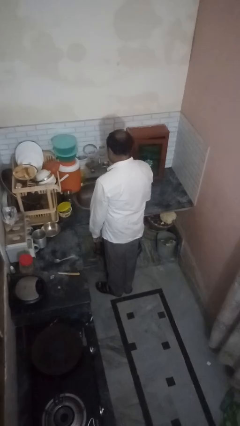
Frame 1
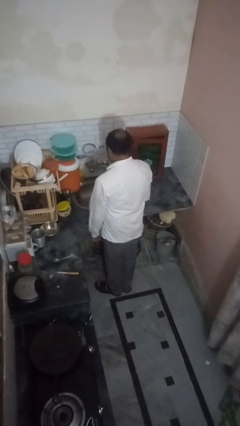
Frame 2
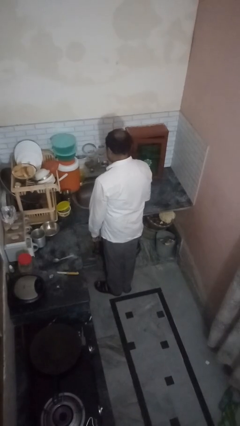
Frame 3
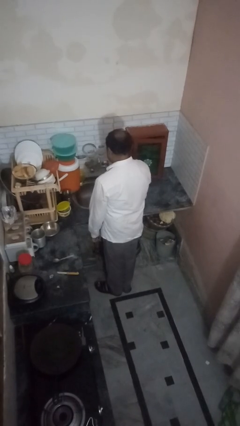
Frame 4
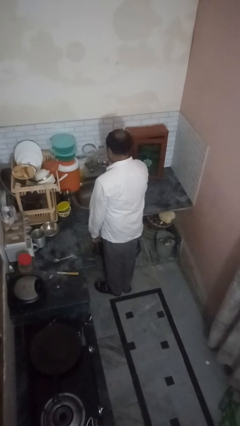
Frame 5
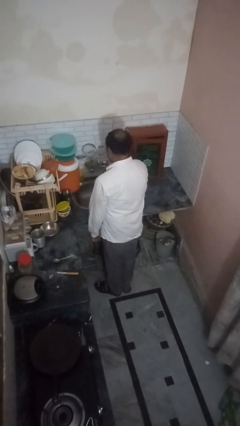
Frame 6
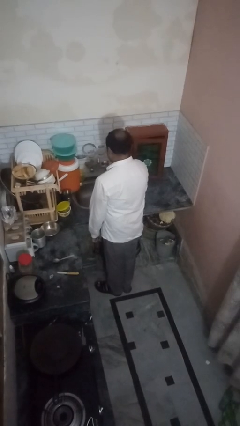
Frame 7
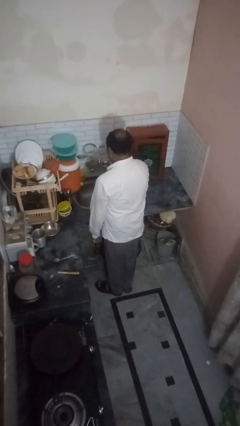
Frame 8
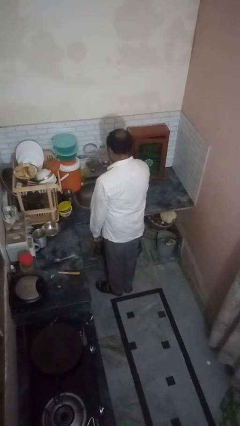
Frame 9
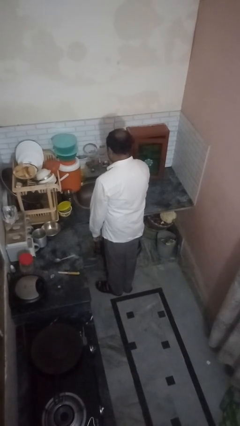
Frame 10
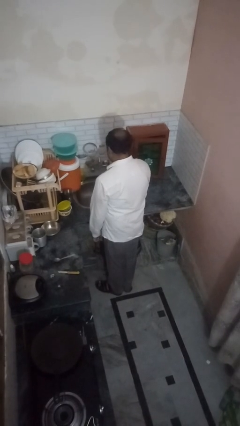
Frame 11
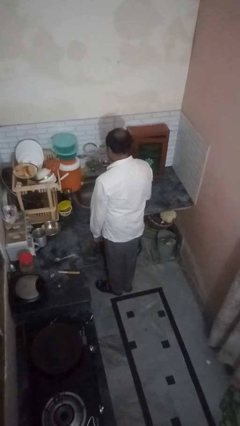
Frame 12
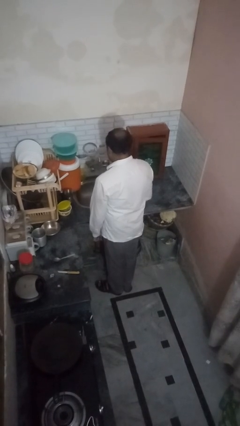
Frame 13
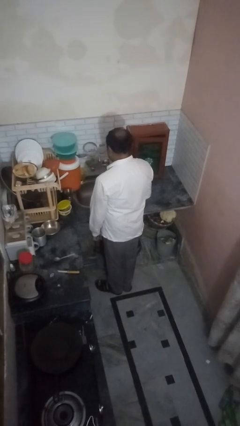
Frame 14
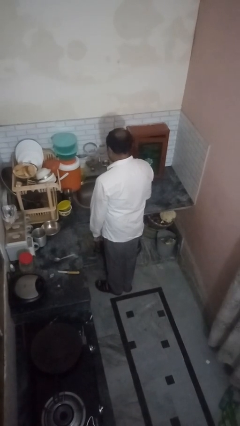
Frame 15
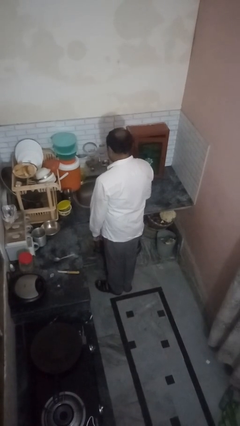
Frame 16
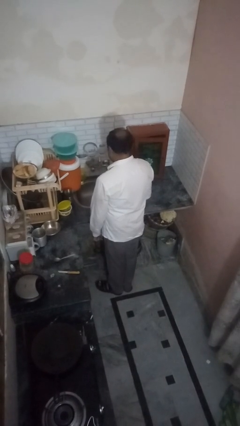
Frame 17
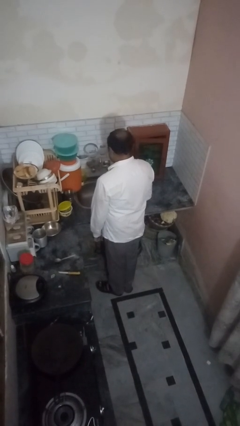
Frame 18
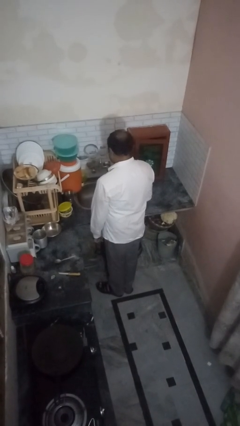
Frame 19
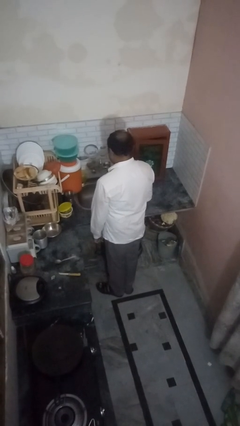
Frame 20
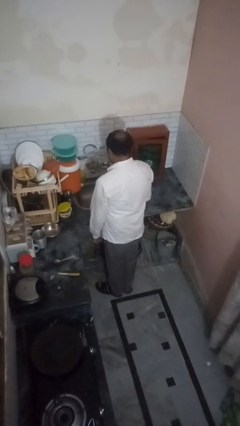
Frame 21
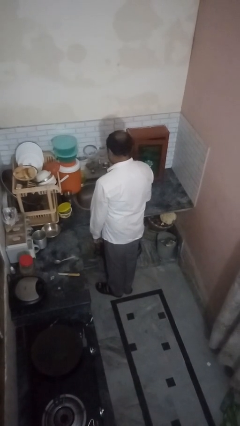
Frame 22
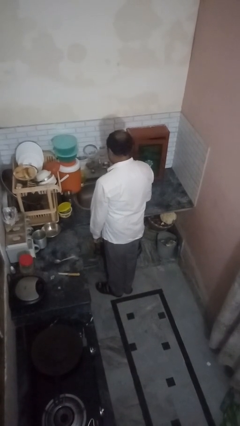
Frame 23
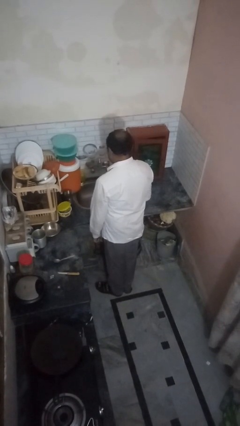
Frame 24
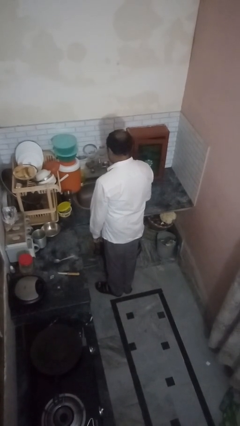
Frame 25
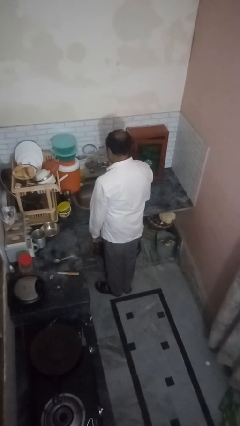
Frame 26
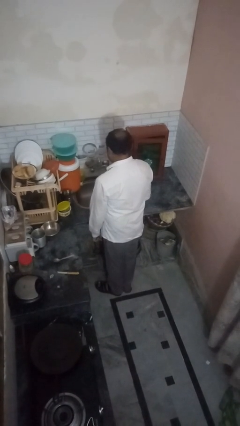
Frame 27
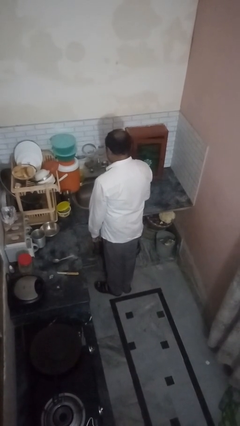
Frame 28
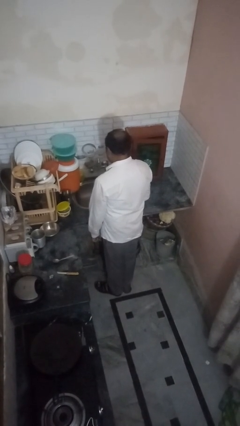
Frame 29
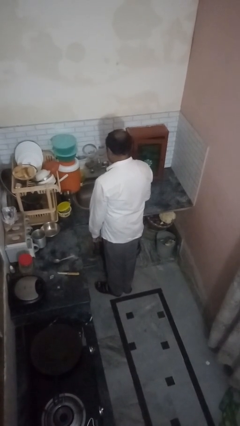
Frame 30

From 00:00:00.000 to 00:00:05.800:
person turns on faucet

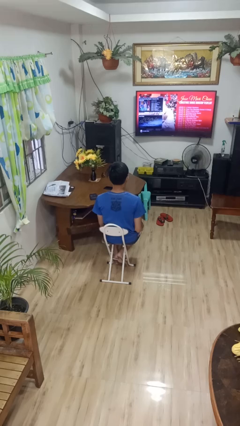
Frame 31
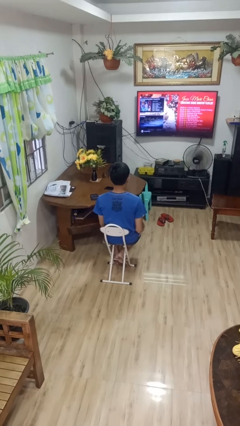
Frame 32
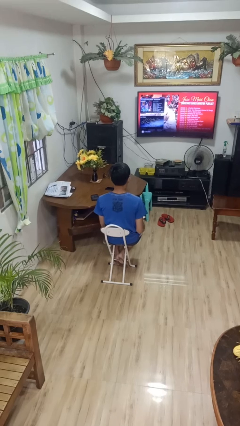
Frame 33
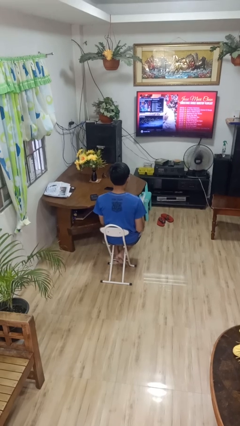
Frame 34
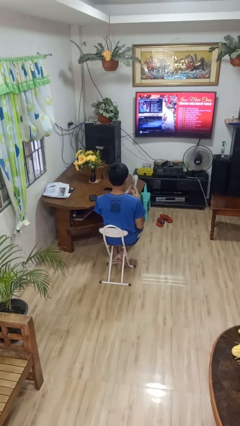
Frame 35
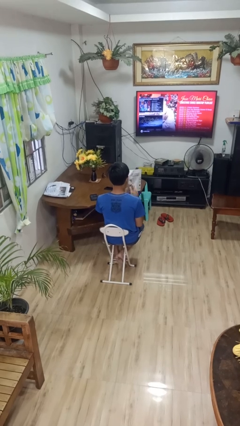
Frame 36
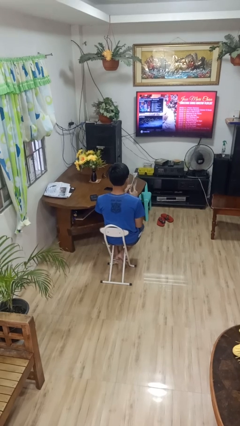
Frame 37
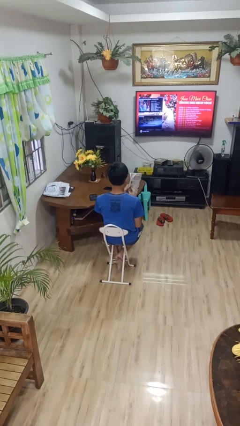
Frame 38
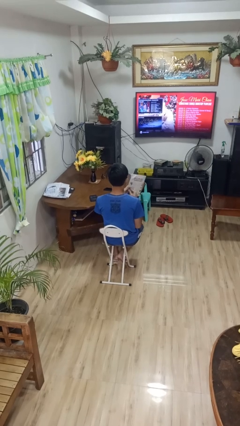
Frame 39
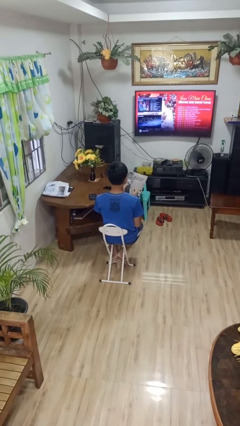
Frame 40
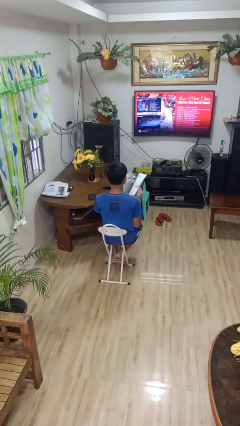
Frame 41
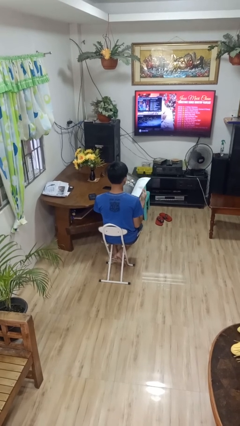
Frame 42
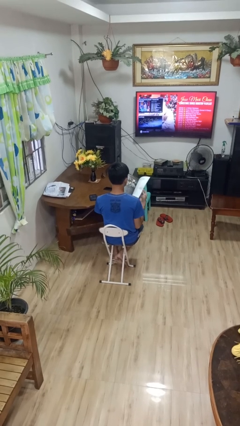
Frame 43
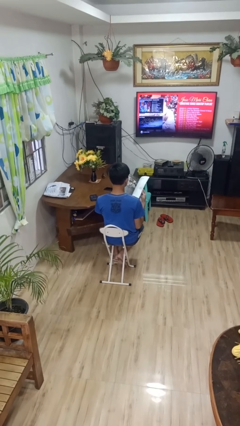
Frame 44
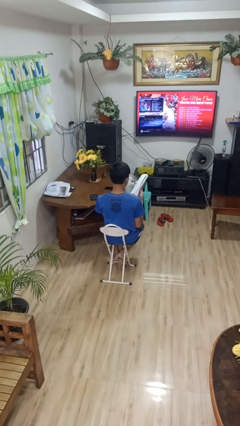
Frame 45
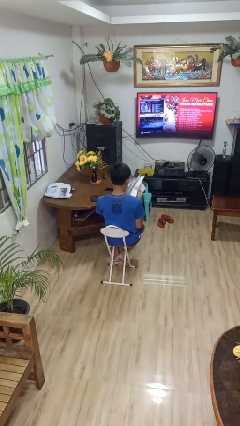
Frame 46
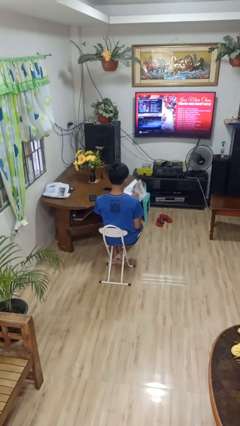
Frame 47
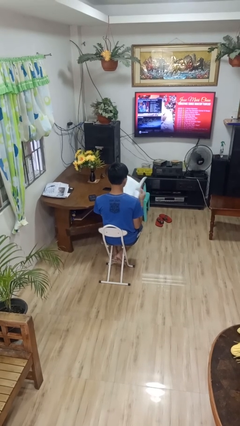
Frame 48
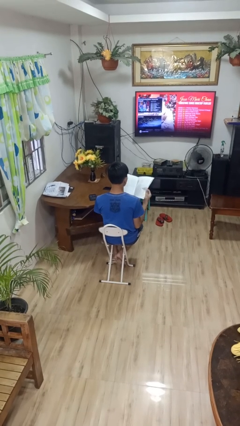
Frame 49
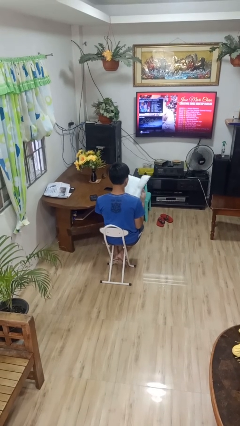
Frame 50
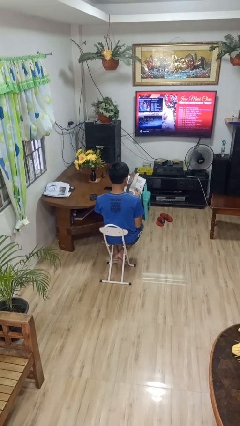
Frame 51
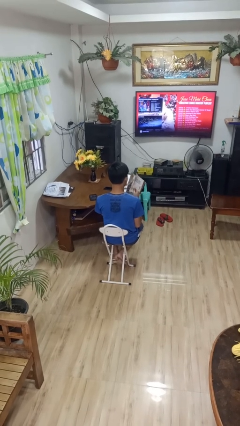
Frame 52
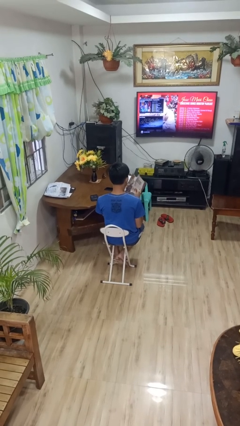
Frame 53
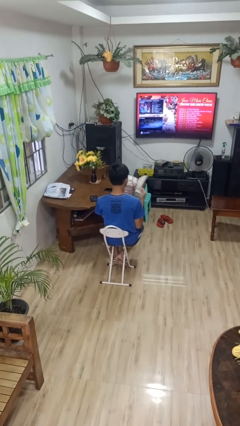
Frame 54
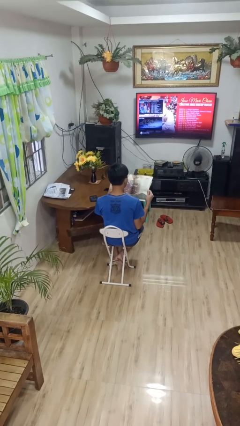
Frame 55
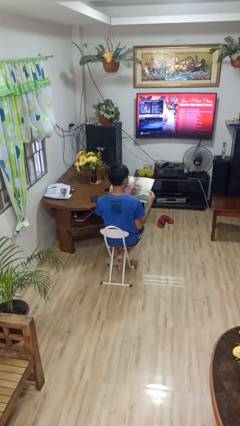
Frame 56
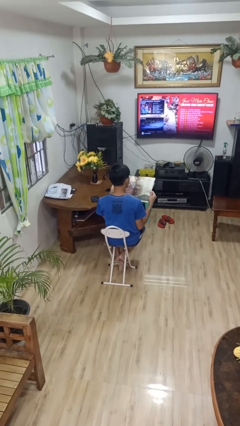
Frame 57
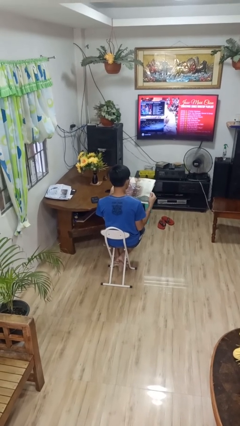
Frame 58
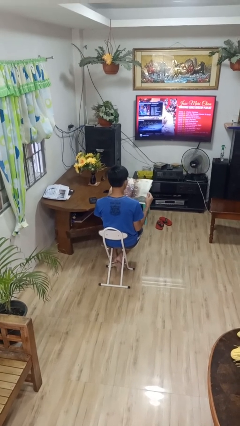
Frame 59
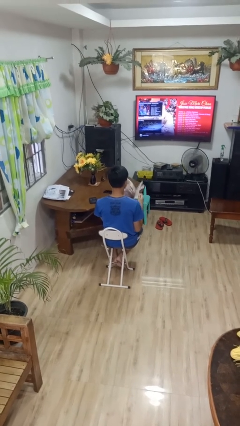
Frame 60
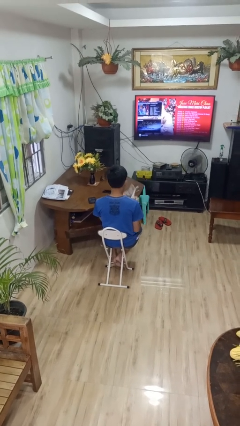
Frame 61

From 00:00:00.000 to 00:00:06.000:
person reads magazine

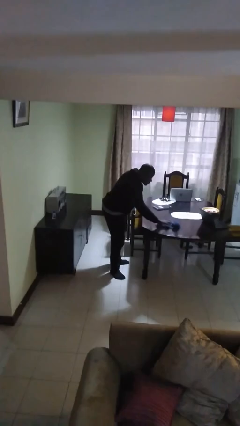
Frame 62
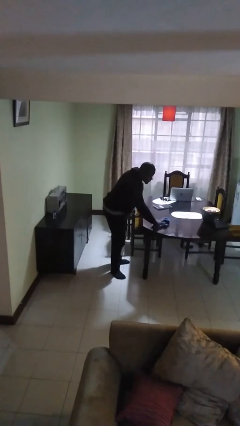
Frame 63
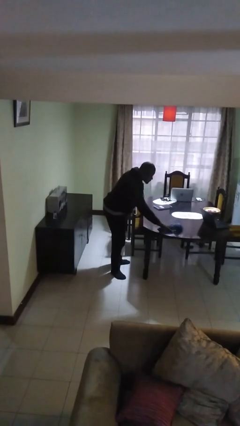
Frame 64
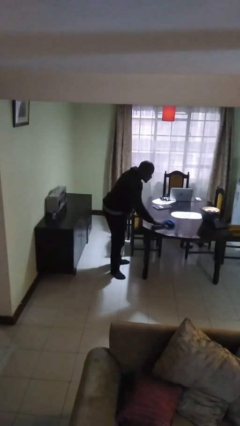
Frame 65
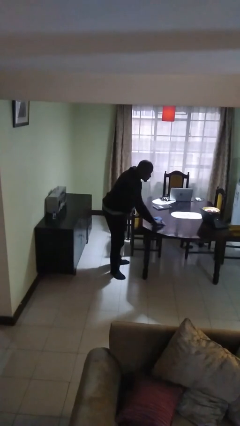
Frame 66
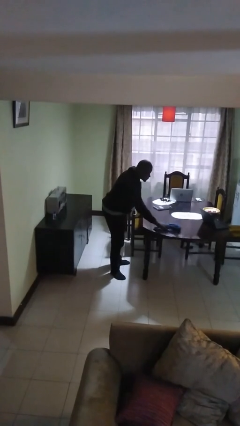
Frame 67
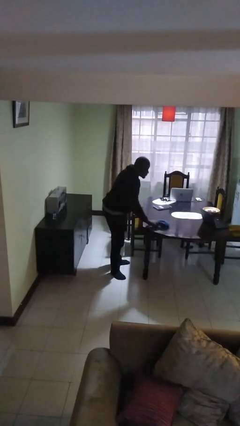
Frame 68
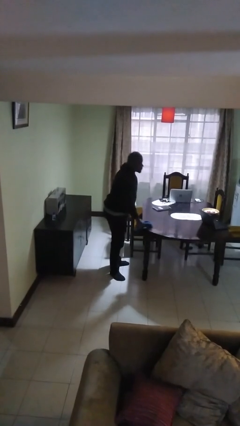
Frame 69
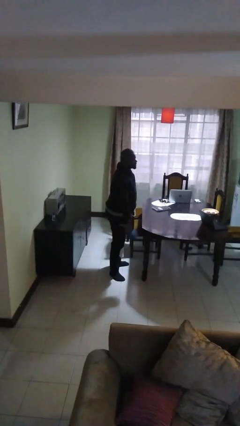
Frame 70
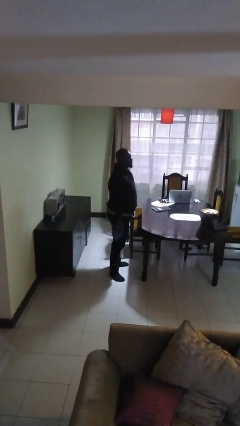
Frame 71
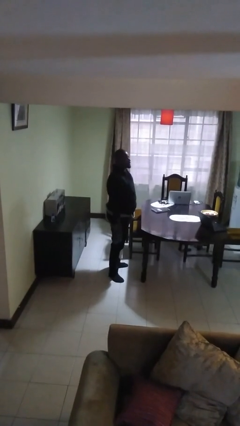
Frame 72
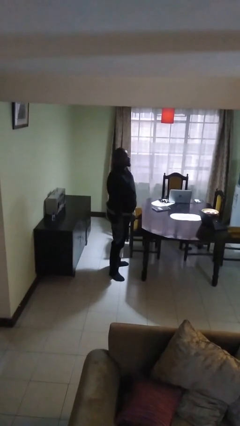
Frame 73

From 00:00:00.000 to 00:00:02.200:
person cleans table with rag

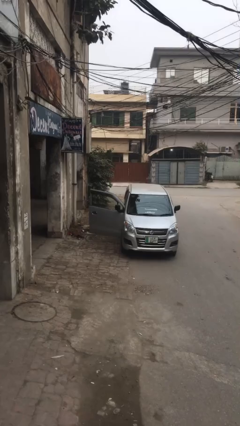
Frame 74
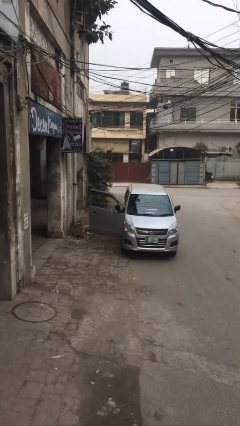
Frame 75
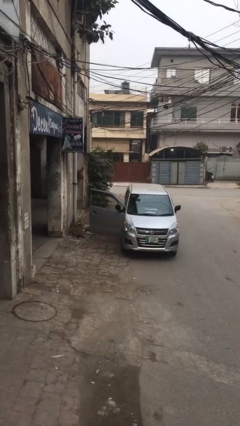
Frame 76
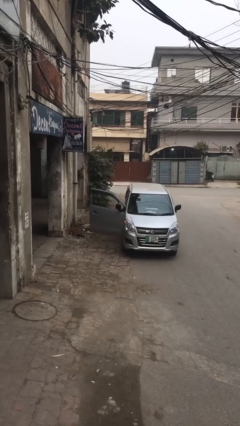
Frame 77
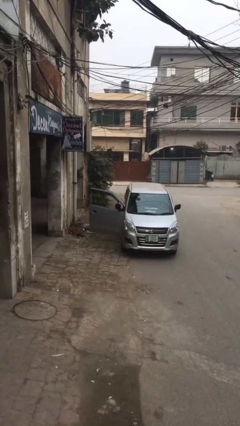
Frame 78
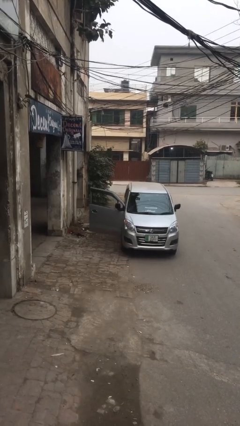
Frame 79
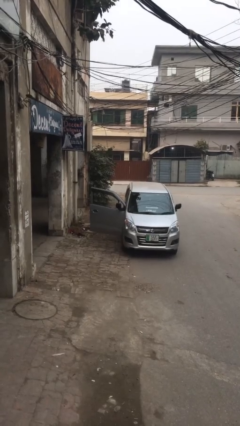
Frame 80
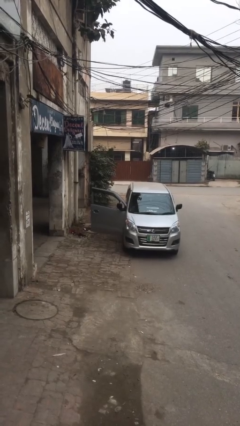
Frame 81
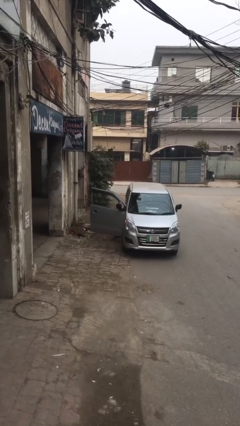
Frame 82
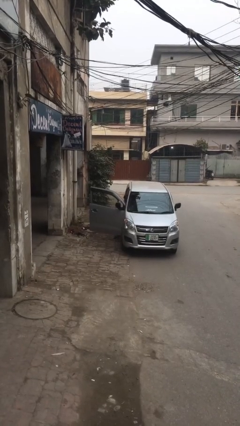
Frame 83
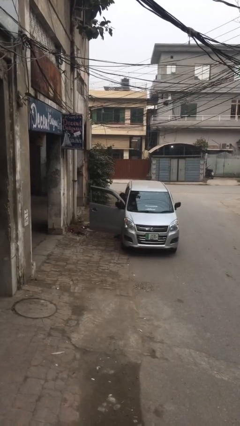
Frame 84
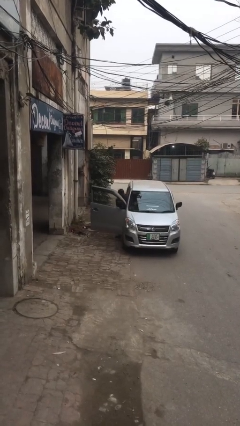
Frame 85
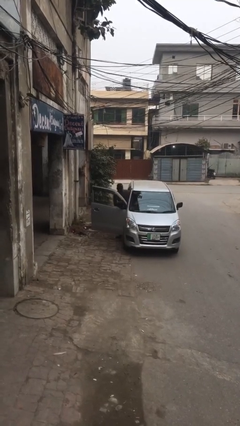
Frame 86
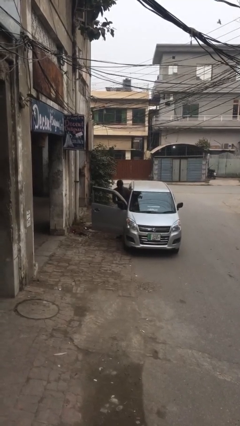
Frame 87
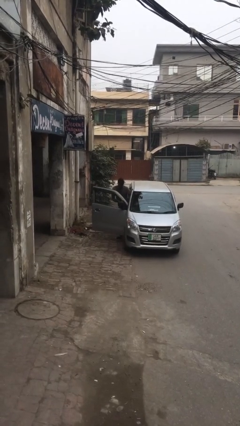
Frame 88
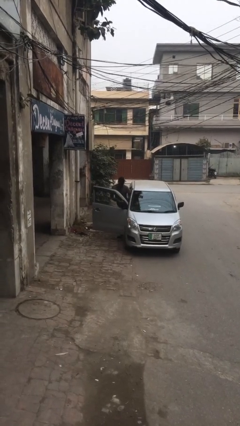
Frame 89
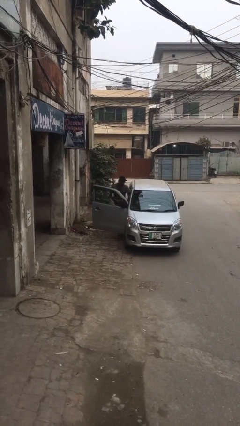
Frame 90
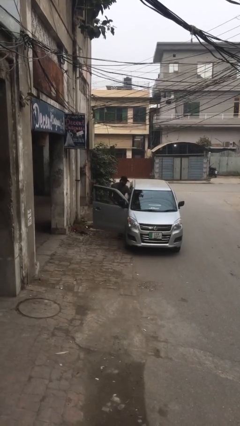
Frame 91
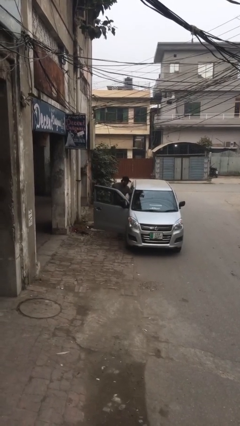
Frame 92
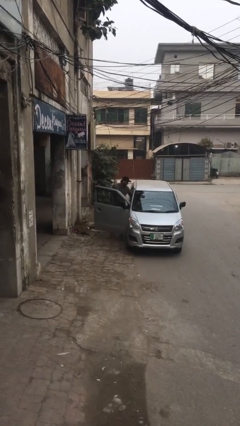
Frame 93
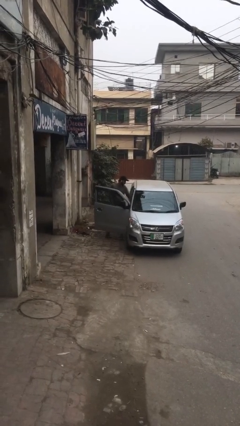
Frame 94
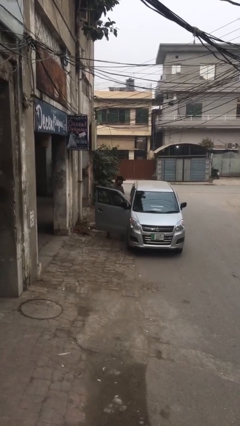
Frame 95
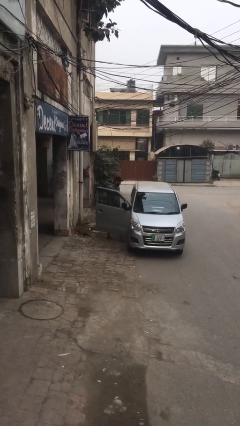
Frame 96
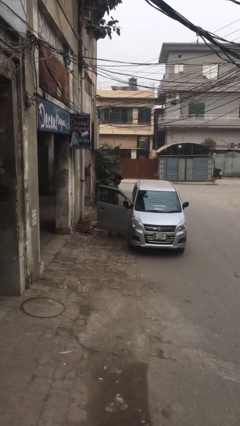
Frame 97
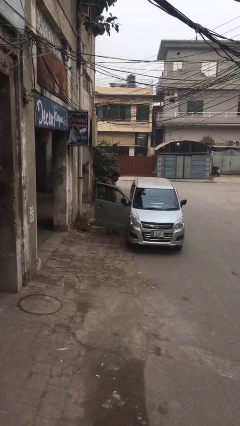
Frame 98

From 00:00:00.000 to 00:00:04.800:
person exits car
